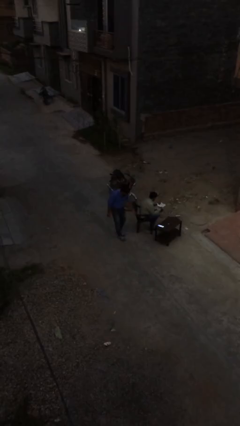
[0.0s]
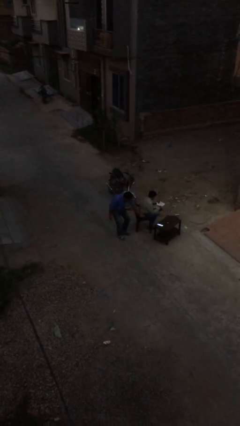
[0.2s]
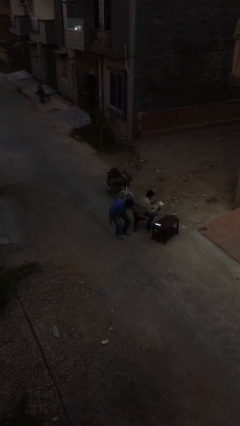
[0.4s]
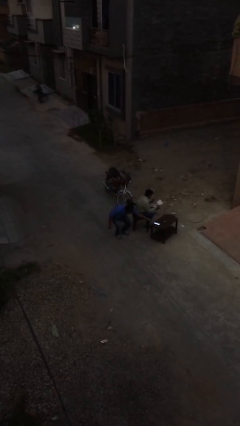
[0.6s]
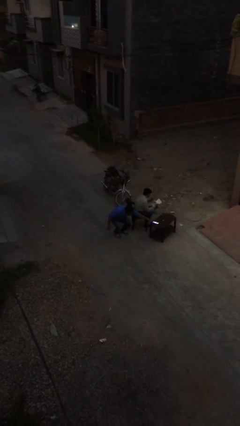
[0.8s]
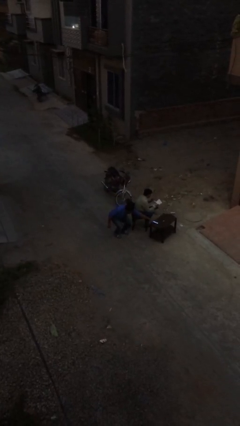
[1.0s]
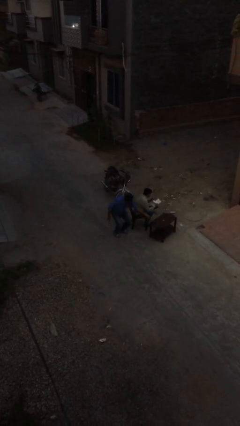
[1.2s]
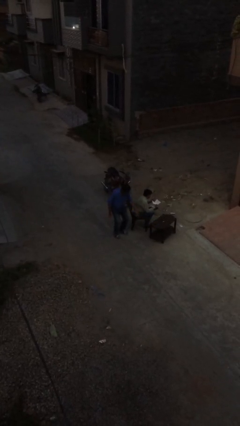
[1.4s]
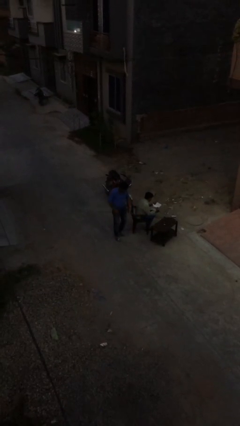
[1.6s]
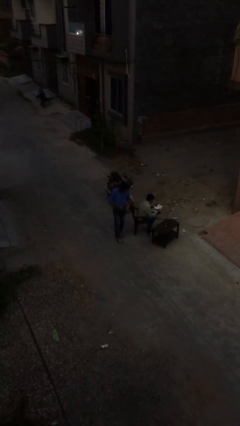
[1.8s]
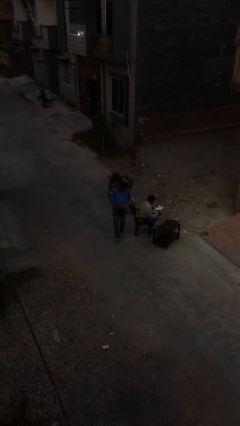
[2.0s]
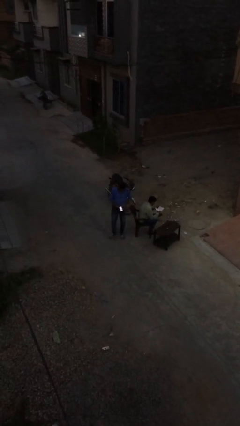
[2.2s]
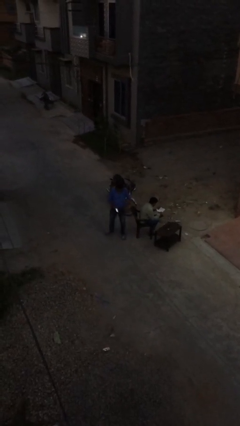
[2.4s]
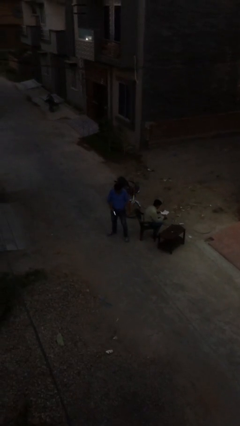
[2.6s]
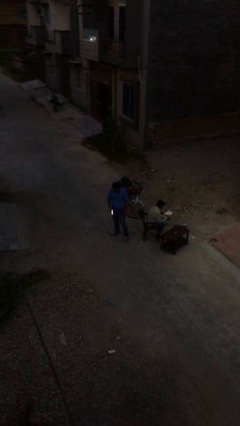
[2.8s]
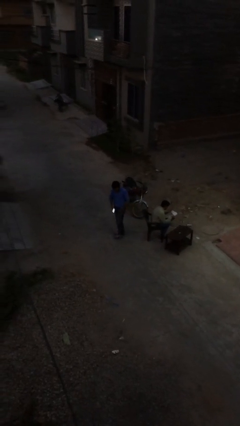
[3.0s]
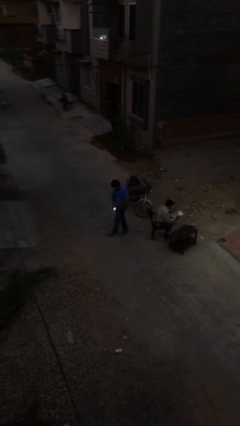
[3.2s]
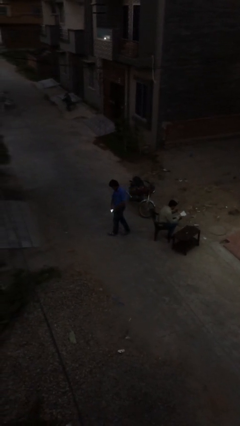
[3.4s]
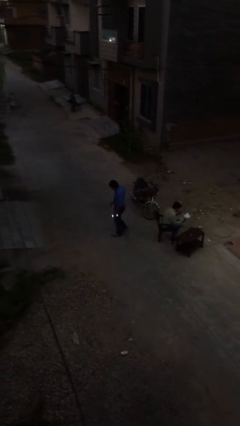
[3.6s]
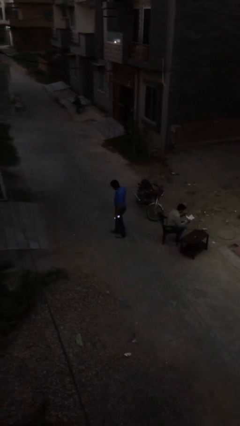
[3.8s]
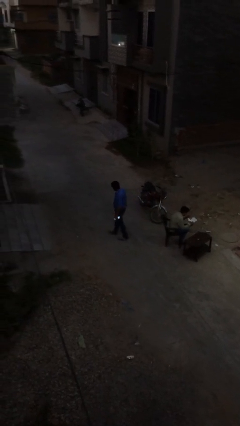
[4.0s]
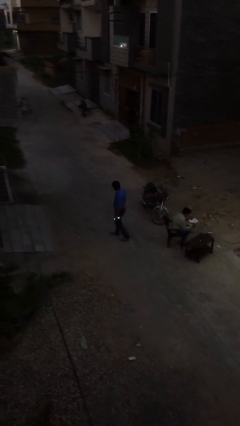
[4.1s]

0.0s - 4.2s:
person steals object from person

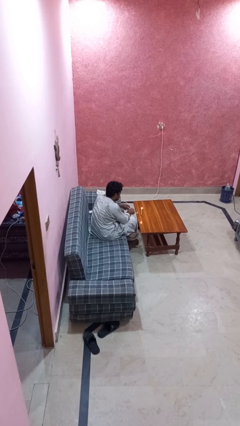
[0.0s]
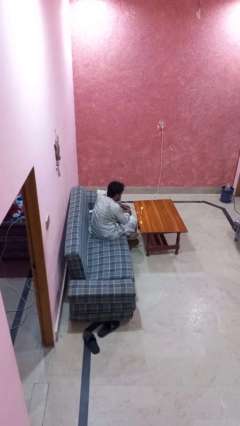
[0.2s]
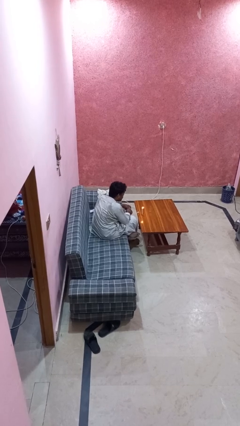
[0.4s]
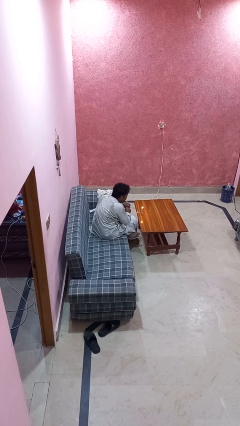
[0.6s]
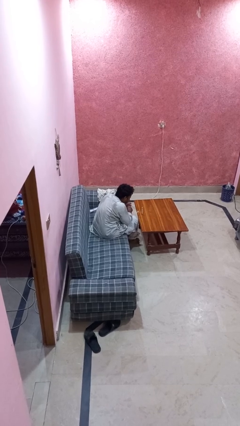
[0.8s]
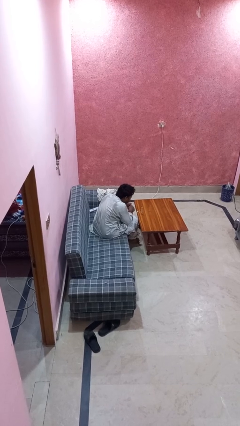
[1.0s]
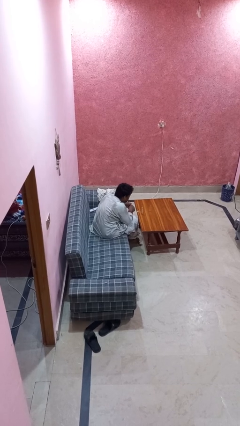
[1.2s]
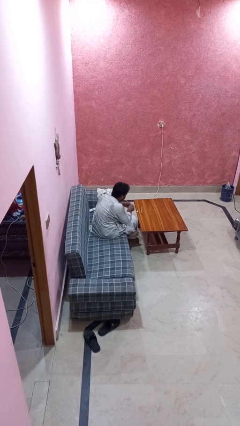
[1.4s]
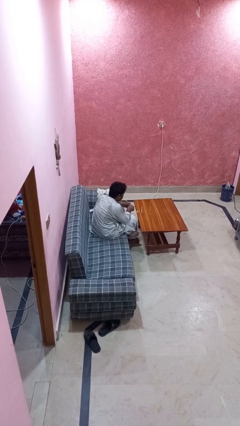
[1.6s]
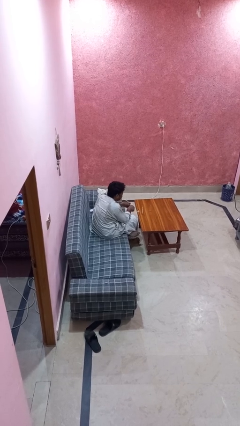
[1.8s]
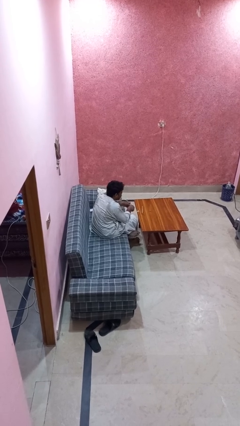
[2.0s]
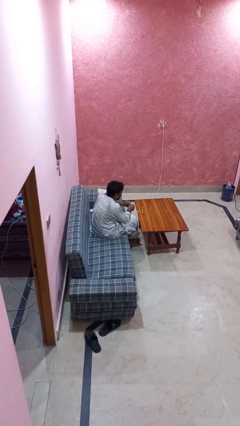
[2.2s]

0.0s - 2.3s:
person extinguishes candle

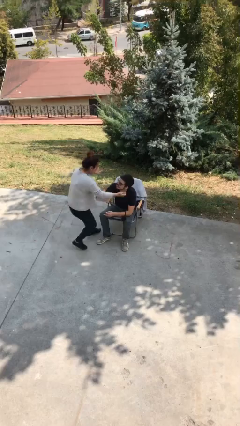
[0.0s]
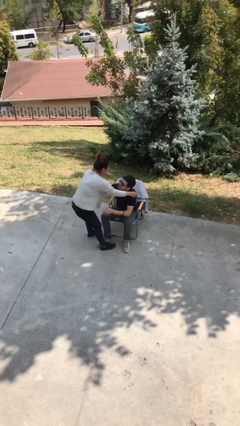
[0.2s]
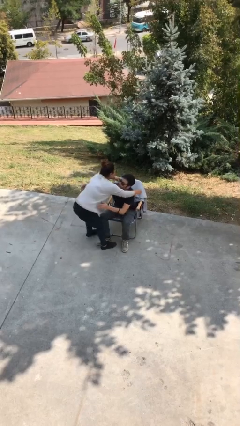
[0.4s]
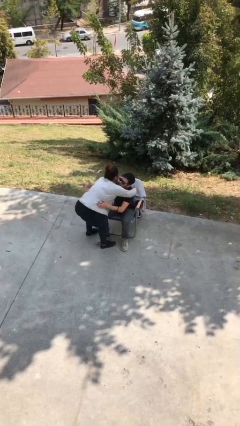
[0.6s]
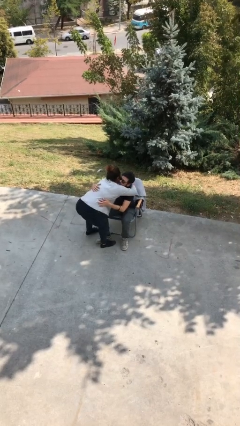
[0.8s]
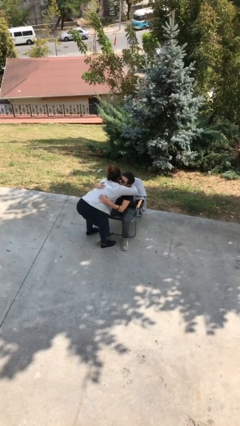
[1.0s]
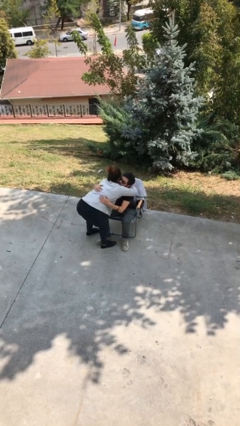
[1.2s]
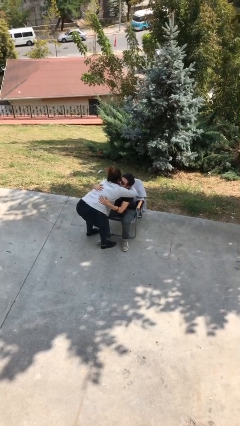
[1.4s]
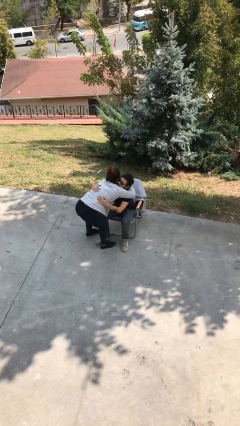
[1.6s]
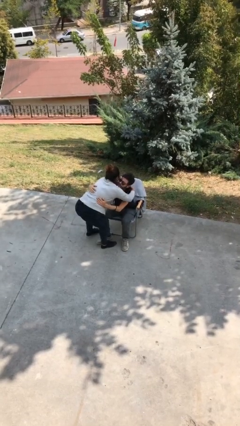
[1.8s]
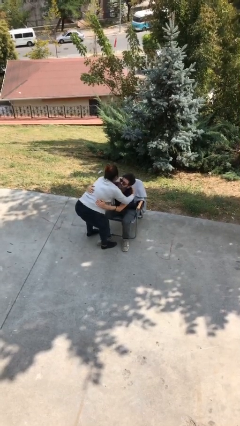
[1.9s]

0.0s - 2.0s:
person embraces person

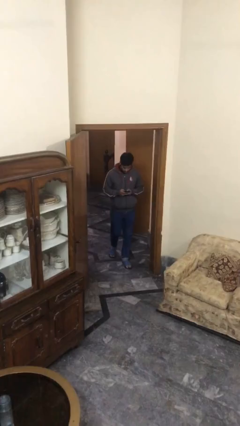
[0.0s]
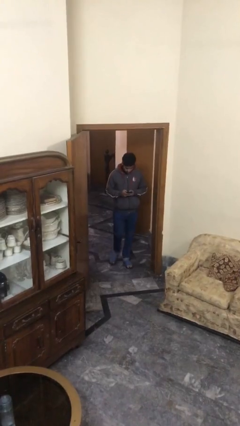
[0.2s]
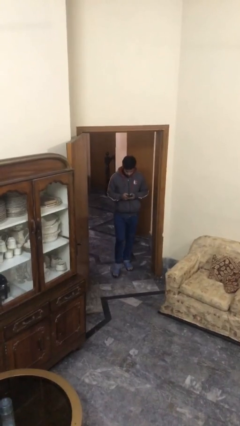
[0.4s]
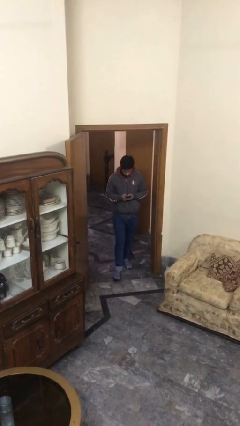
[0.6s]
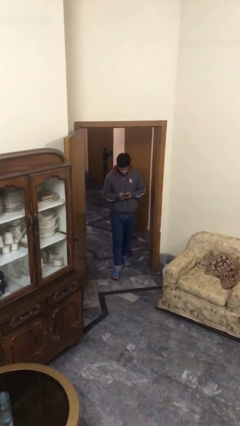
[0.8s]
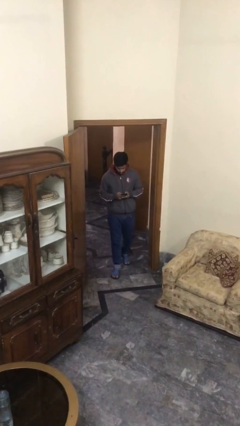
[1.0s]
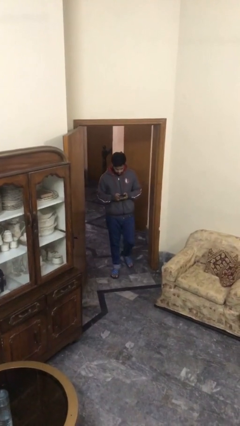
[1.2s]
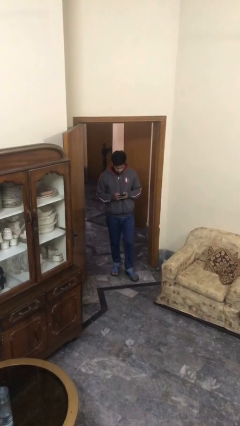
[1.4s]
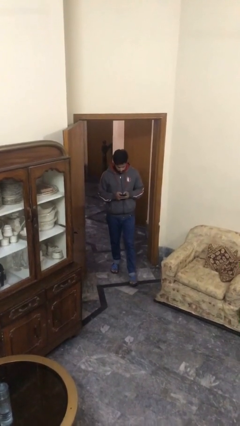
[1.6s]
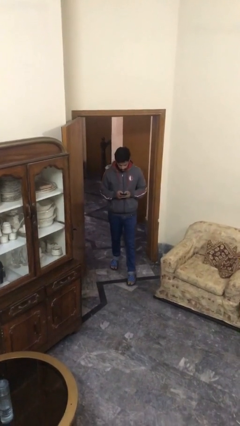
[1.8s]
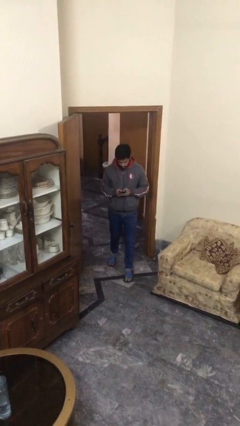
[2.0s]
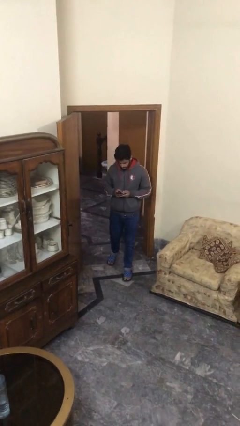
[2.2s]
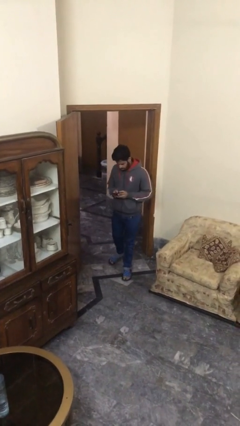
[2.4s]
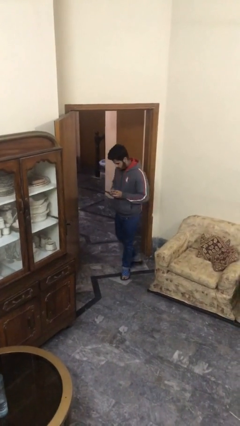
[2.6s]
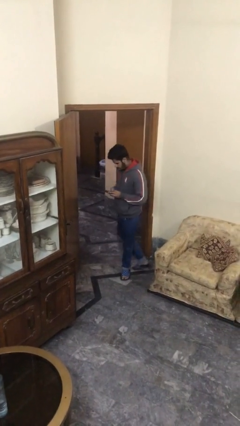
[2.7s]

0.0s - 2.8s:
person enters scene through structure

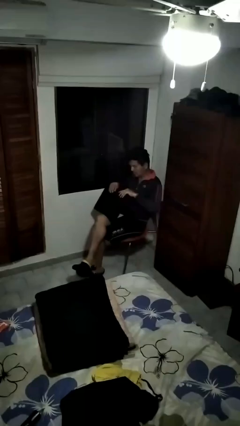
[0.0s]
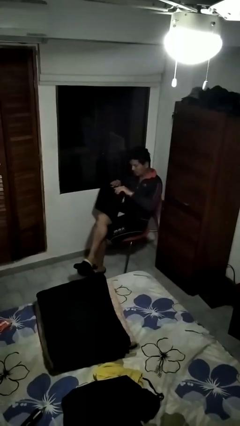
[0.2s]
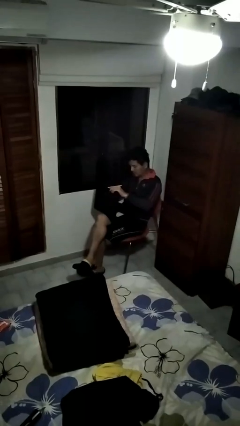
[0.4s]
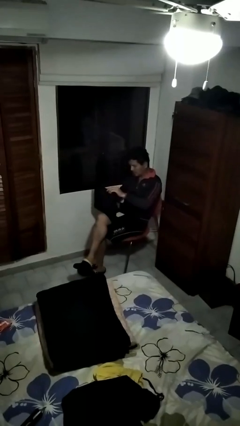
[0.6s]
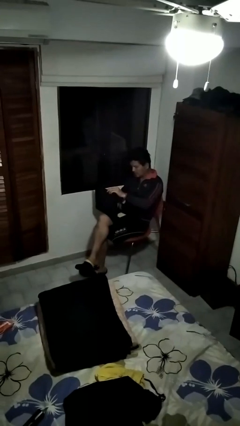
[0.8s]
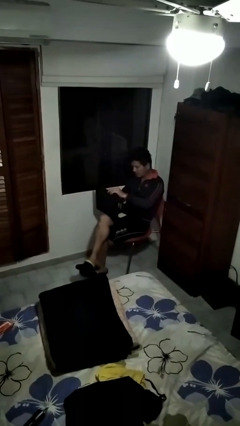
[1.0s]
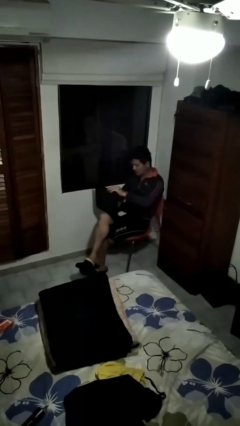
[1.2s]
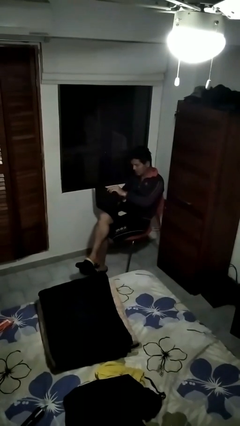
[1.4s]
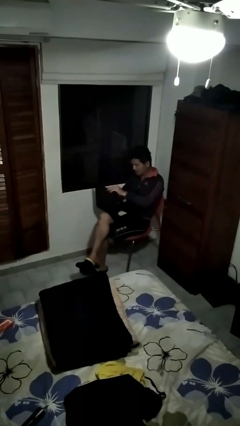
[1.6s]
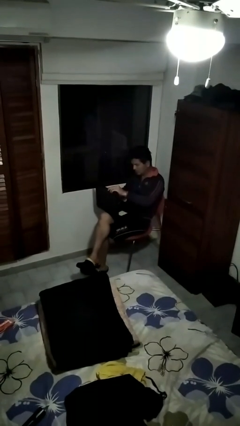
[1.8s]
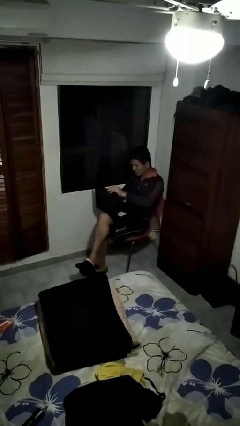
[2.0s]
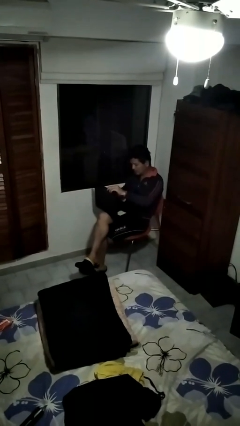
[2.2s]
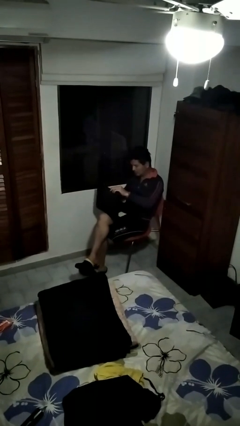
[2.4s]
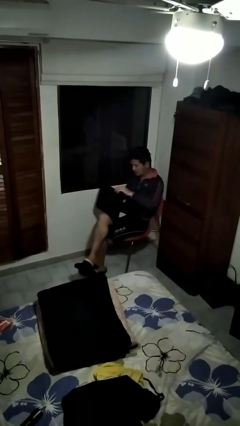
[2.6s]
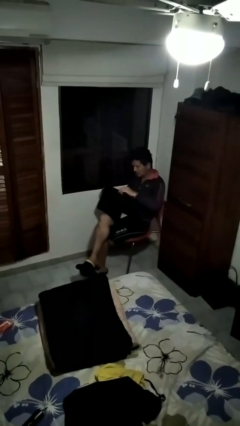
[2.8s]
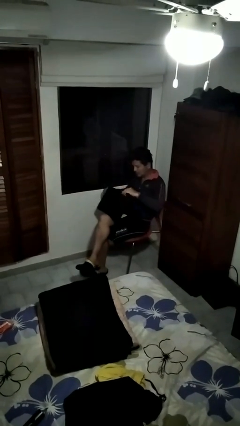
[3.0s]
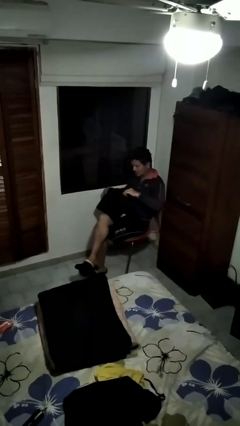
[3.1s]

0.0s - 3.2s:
person interacts with laptop

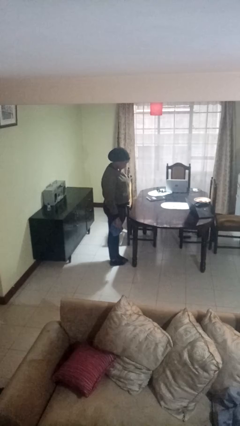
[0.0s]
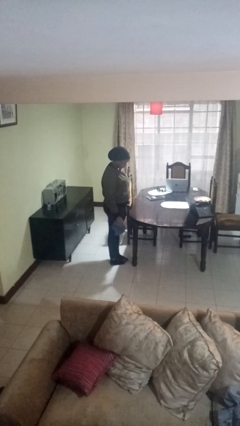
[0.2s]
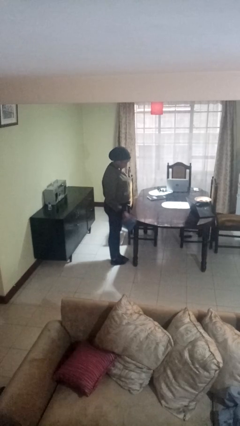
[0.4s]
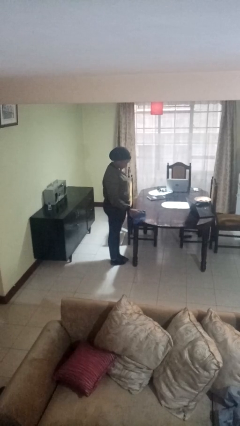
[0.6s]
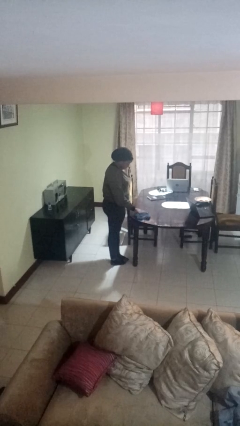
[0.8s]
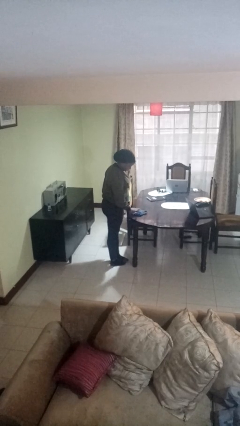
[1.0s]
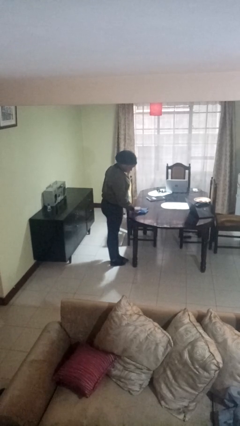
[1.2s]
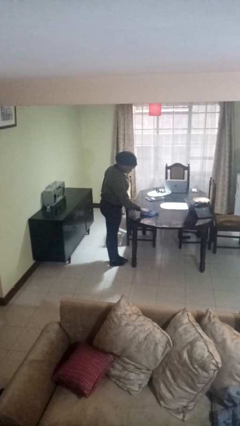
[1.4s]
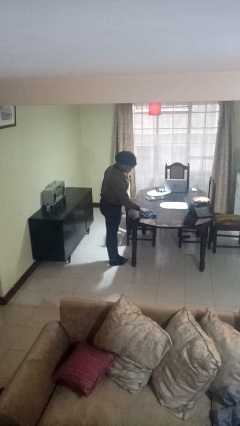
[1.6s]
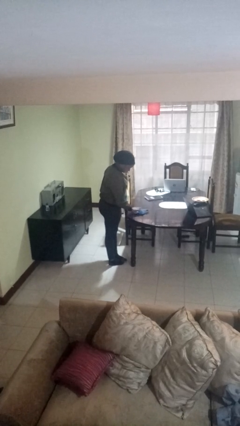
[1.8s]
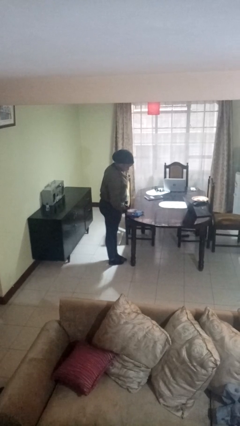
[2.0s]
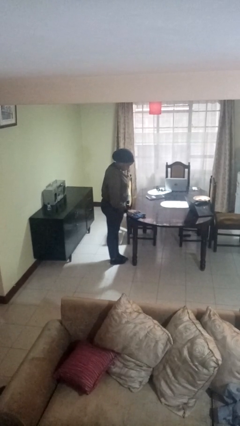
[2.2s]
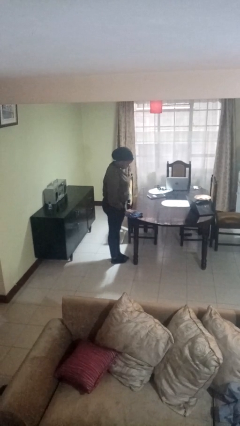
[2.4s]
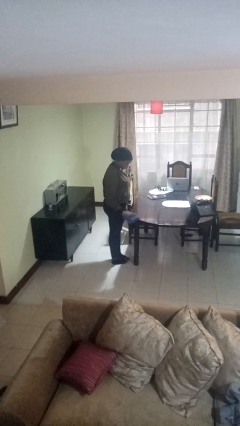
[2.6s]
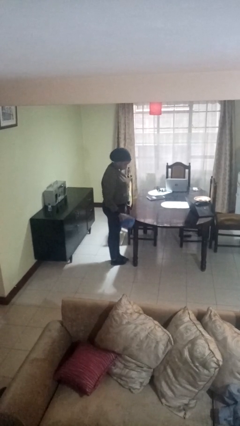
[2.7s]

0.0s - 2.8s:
person cleans table with rag

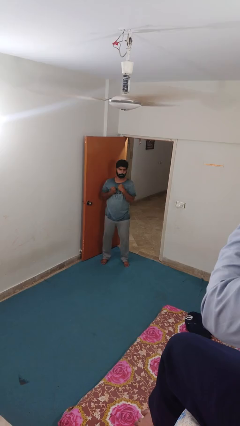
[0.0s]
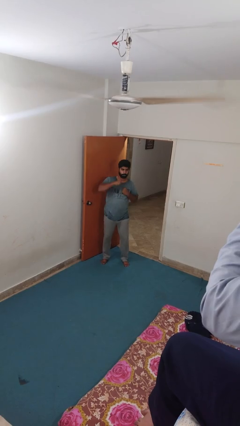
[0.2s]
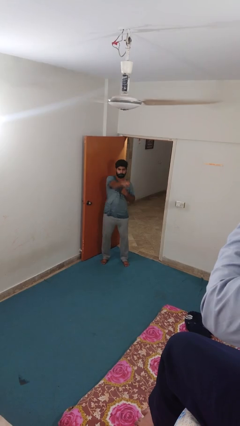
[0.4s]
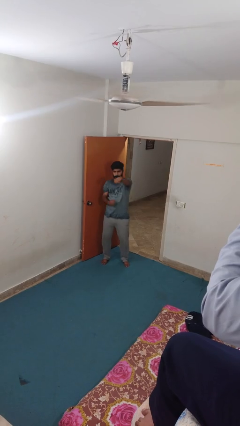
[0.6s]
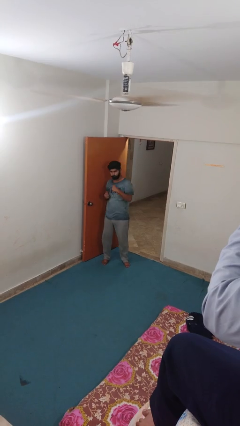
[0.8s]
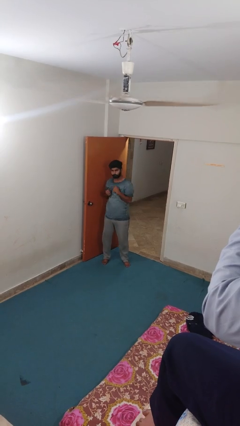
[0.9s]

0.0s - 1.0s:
person punches
